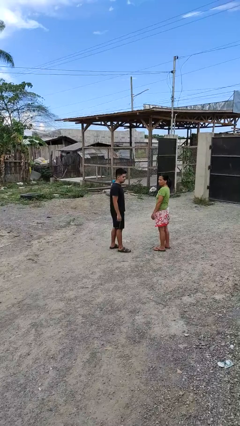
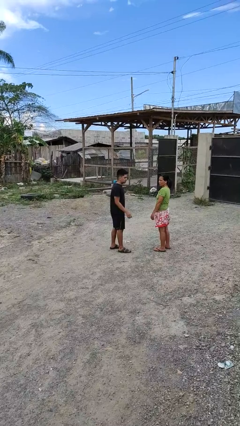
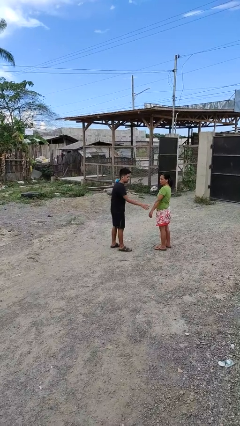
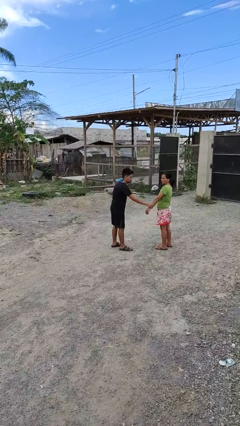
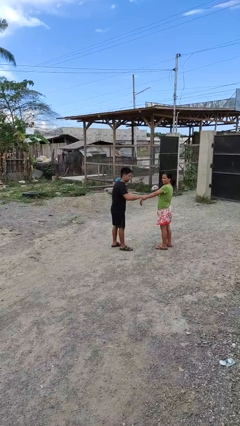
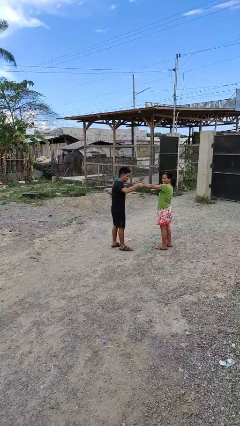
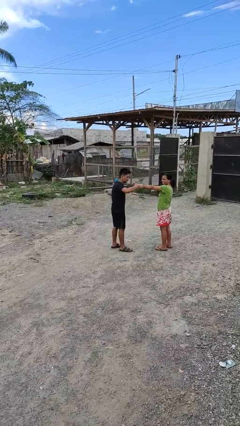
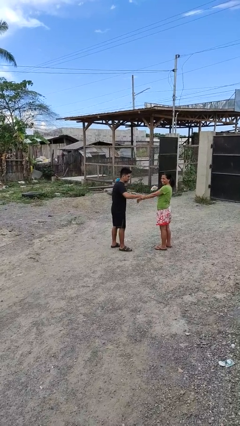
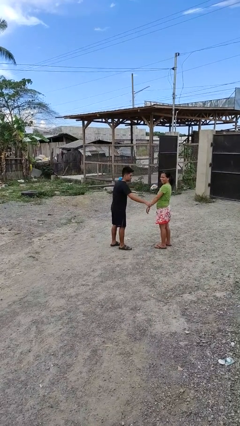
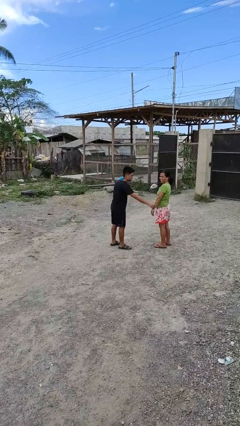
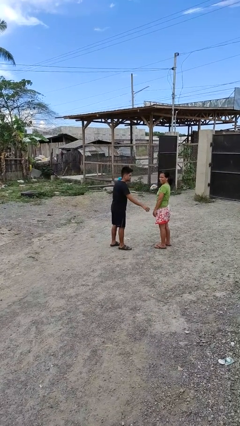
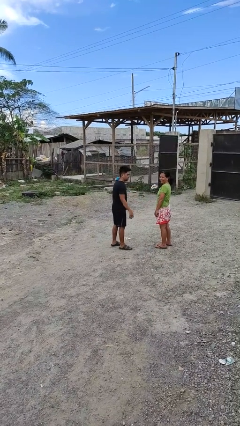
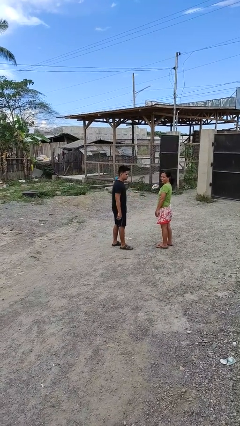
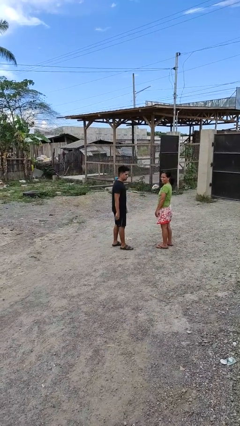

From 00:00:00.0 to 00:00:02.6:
person grabs person by forearm

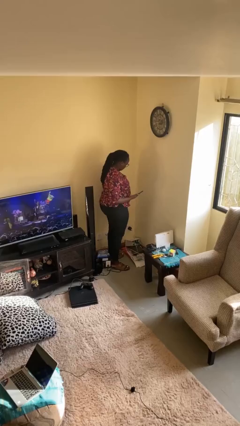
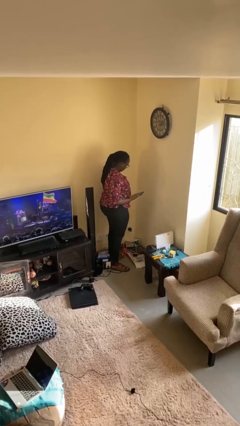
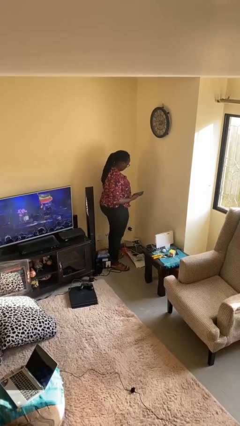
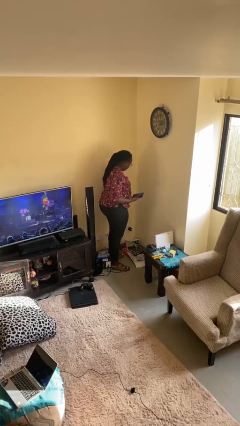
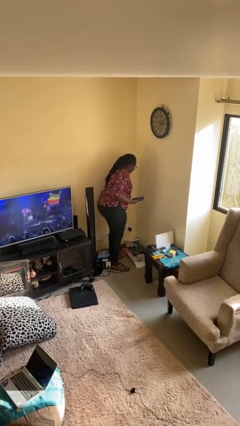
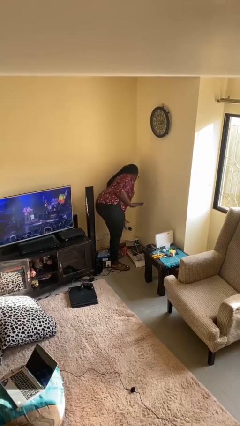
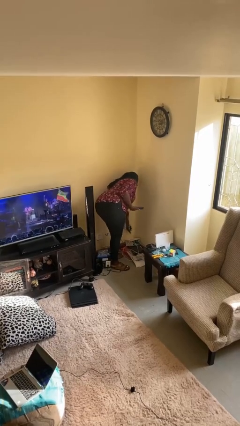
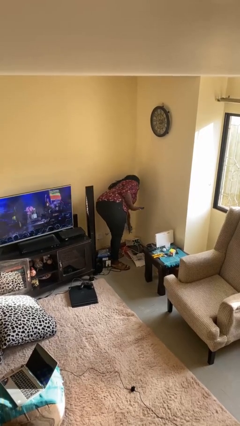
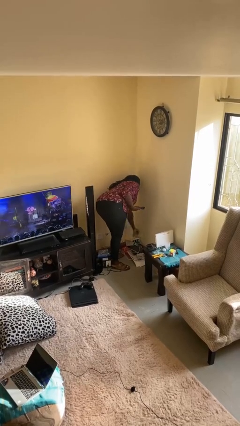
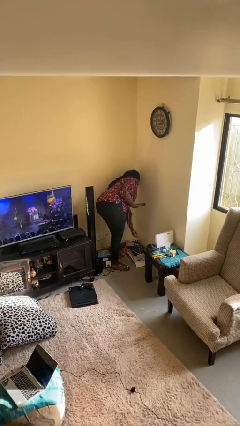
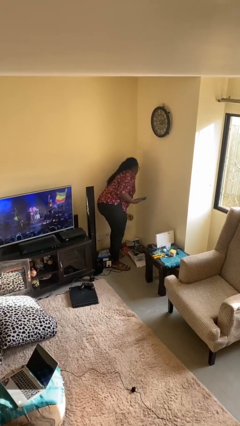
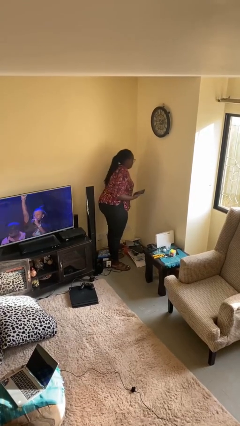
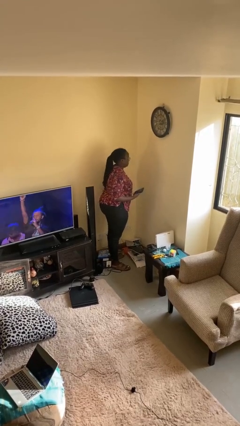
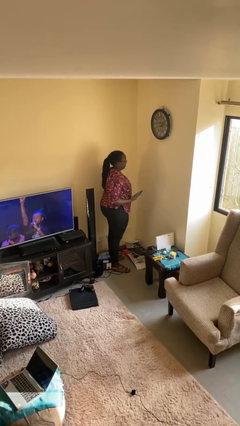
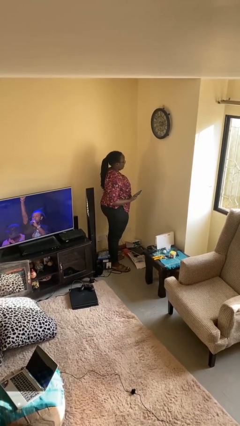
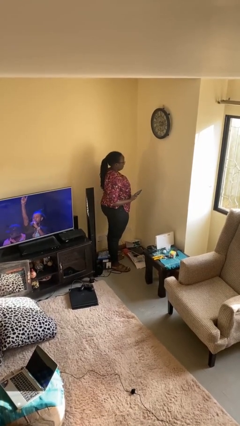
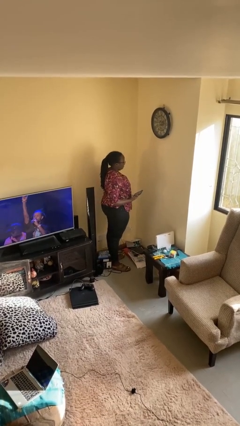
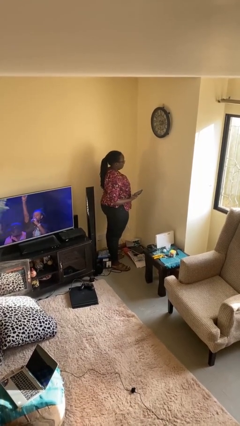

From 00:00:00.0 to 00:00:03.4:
person unplugs from electrical socket

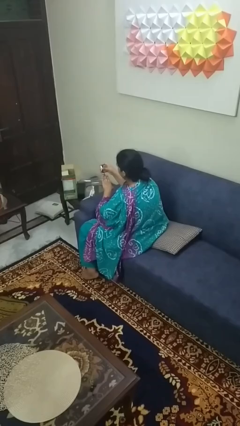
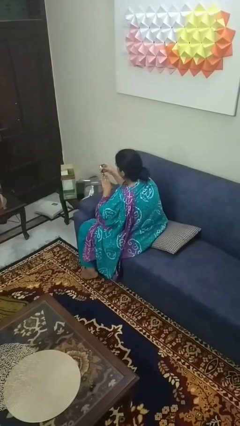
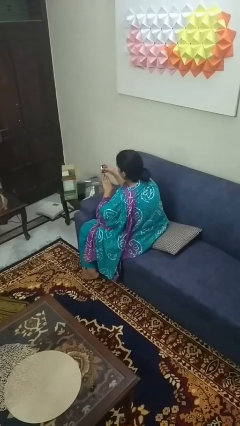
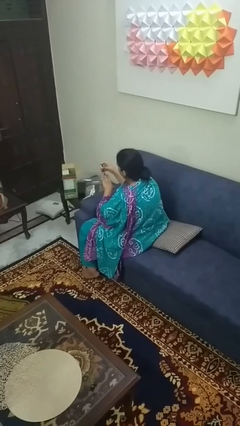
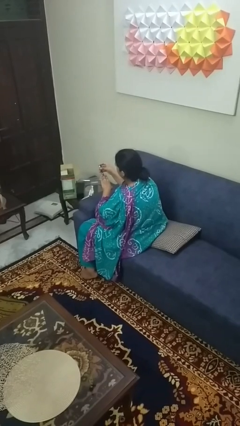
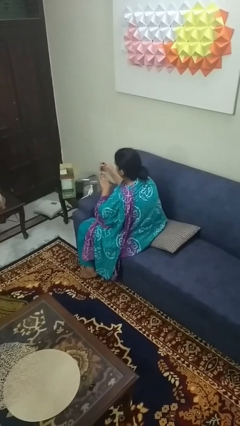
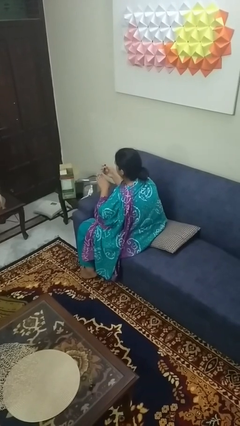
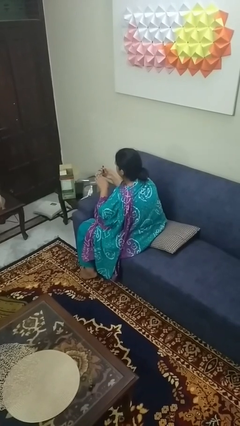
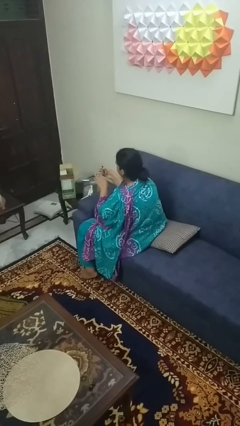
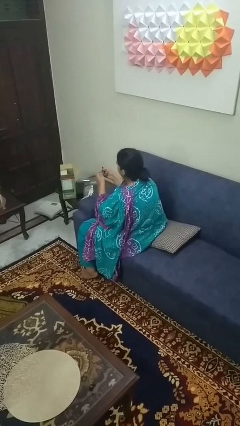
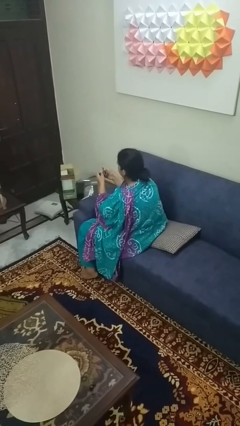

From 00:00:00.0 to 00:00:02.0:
person clips fingernails

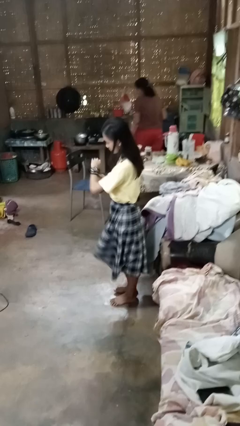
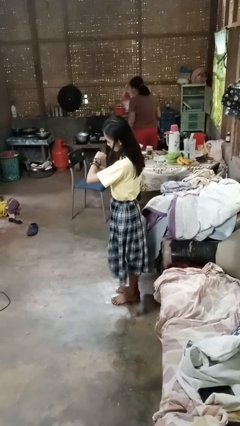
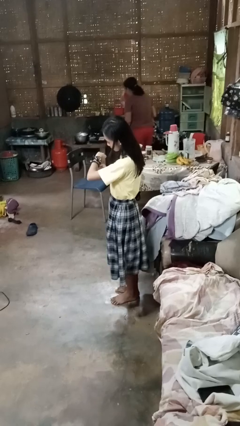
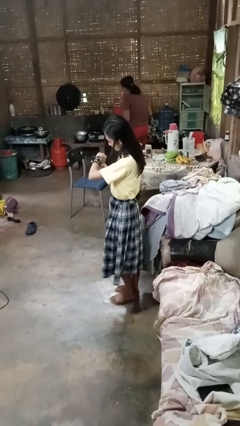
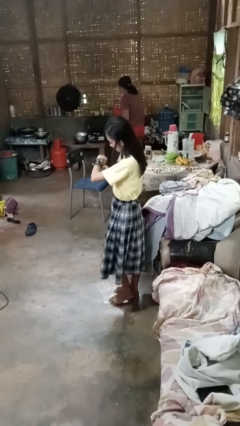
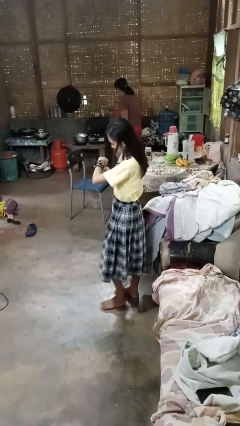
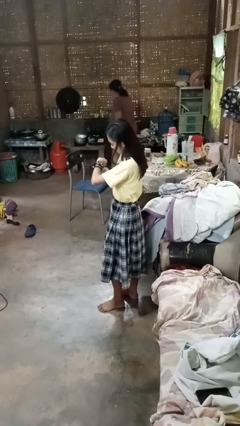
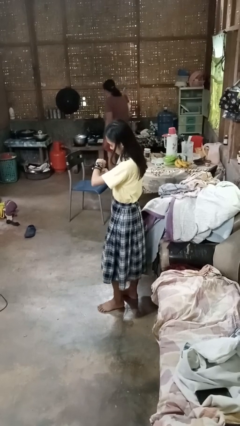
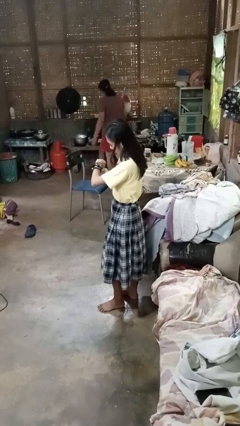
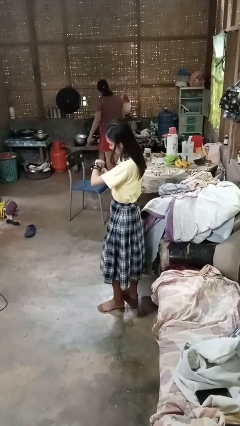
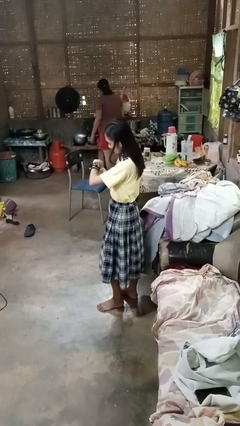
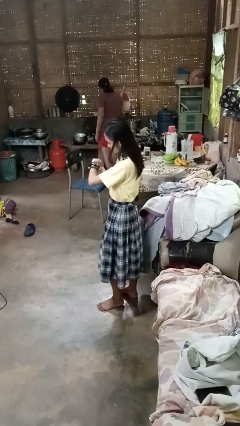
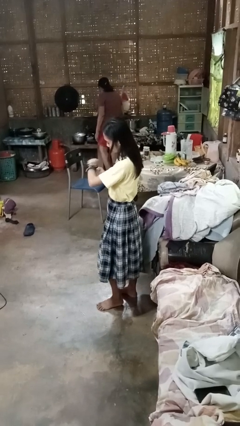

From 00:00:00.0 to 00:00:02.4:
person looks at wristwatch

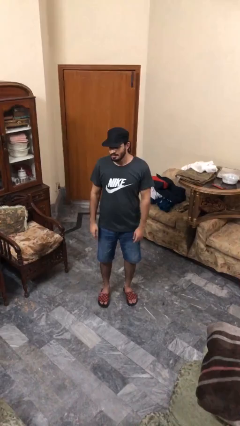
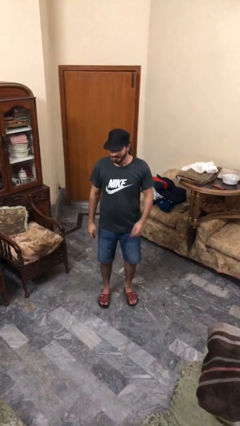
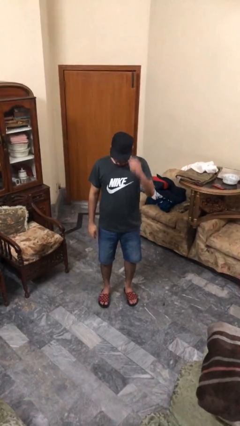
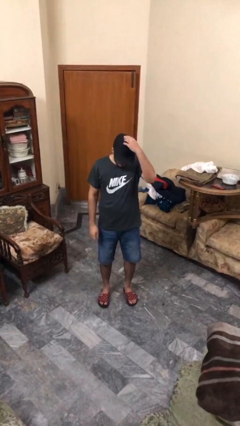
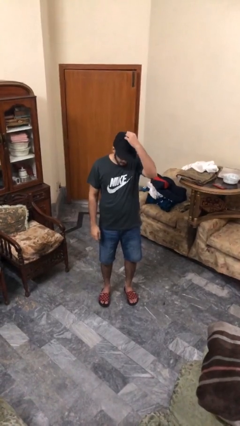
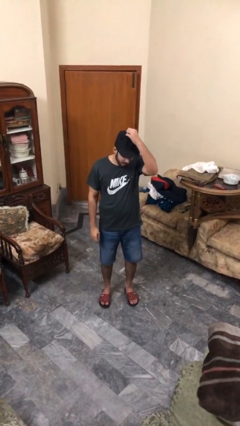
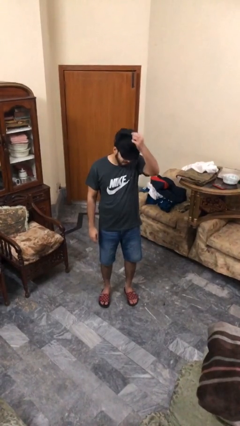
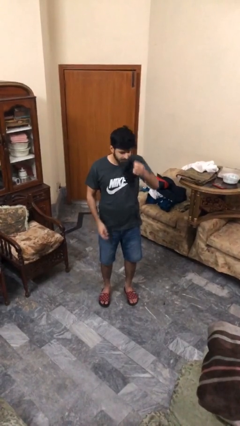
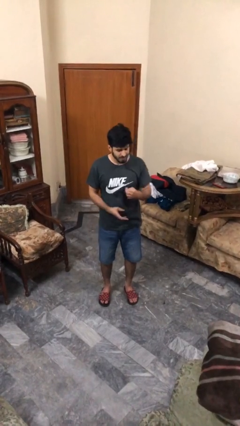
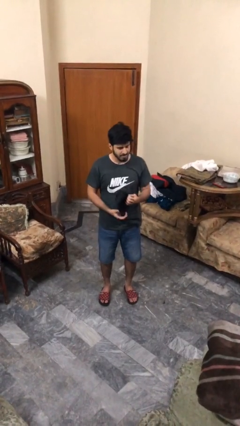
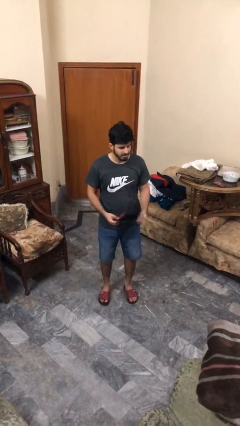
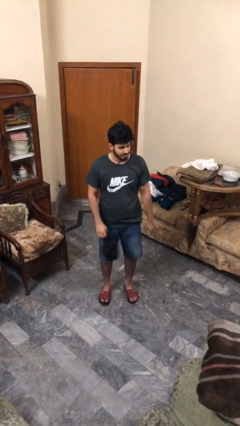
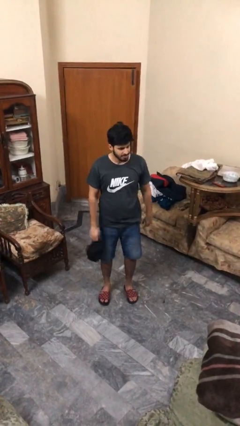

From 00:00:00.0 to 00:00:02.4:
person takes off hat

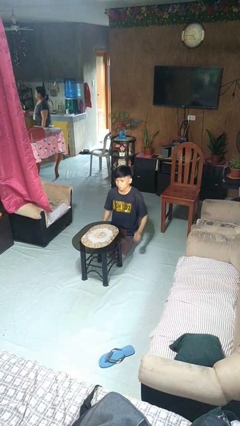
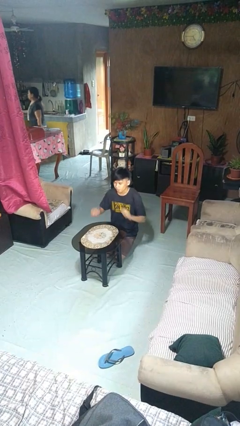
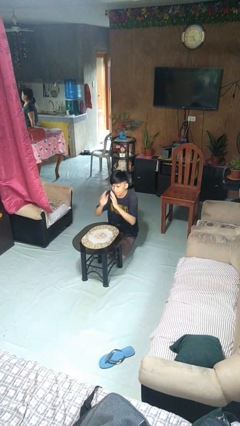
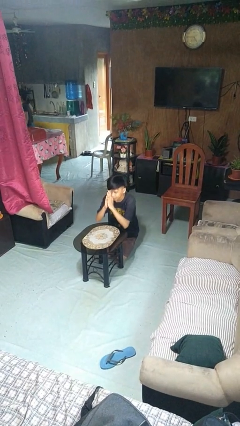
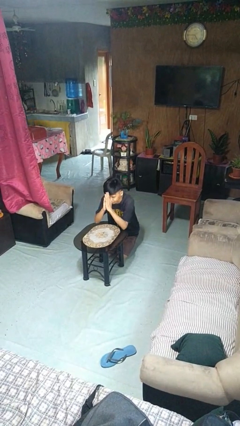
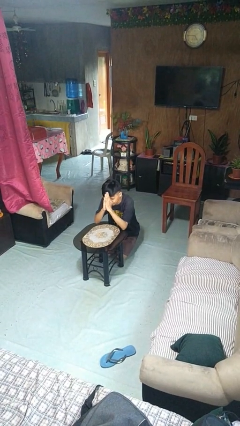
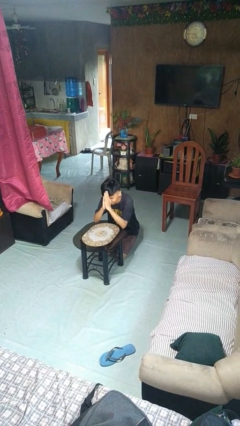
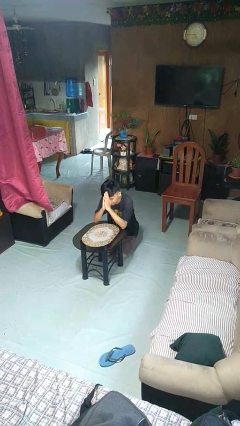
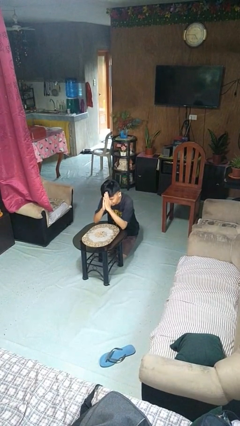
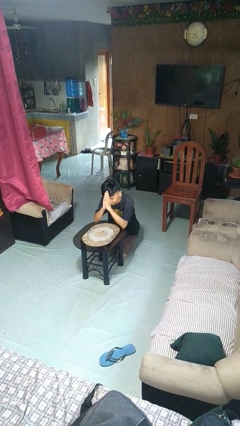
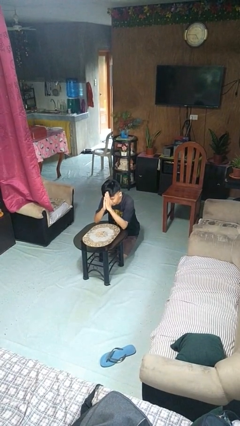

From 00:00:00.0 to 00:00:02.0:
person prays

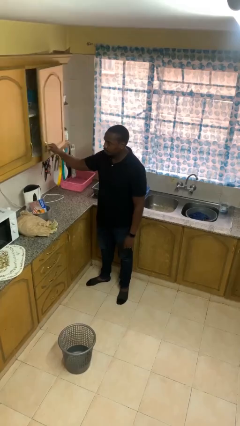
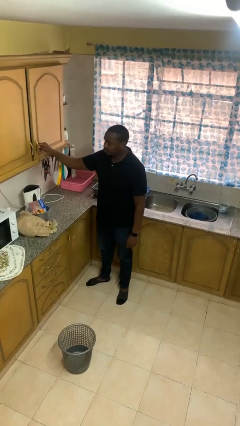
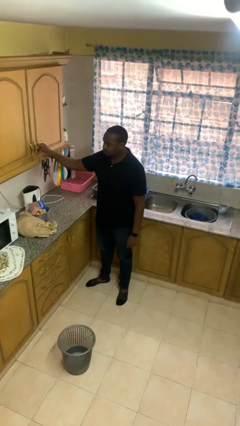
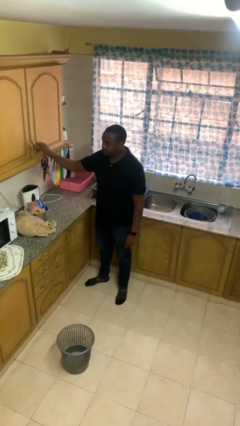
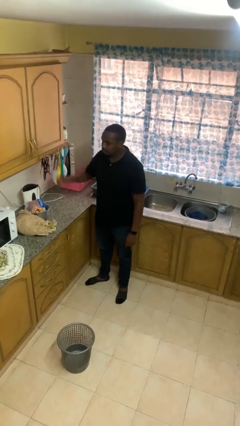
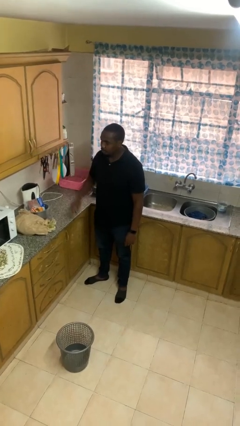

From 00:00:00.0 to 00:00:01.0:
person opens cabinet

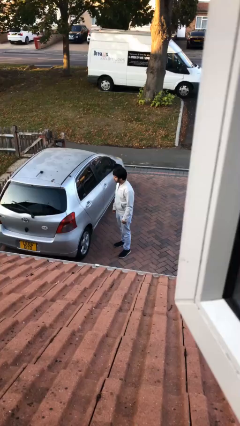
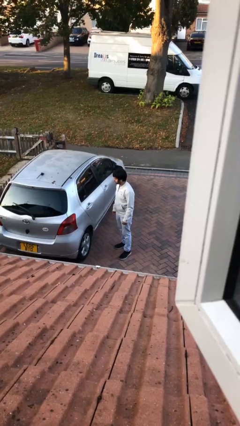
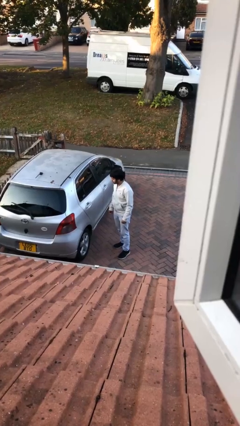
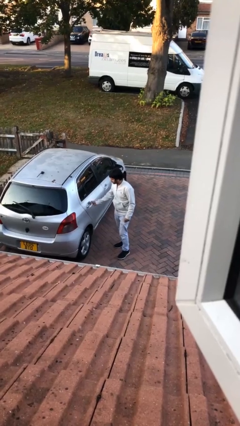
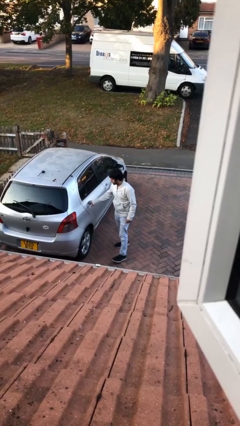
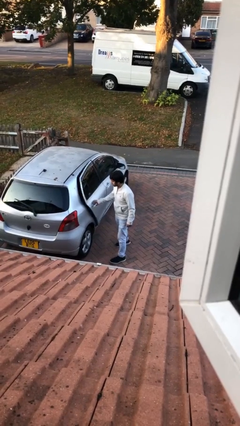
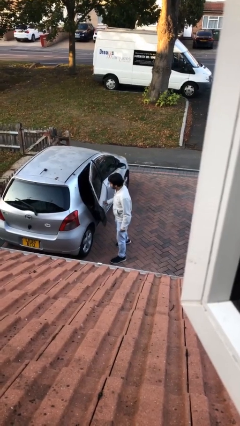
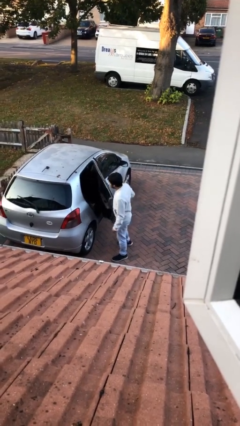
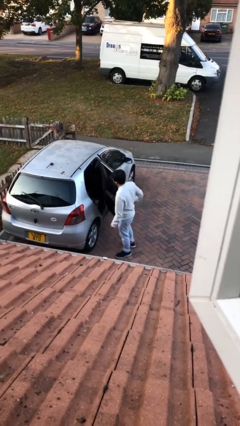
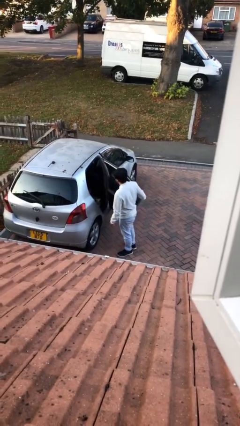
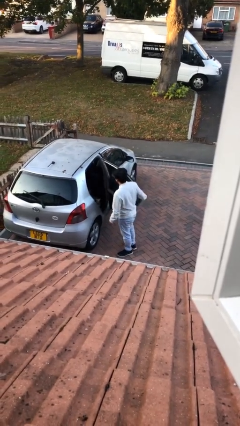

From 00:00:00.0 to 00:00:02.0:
person opens car door
